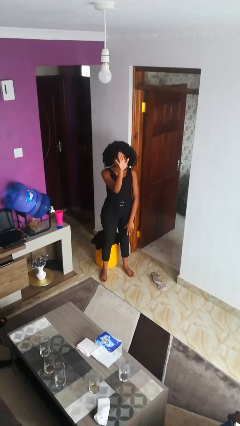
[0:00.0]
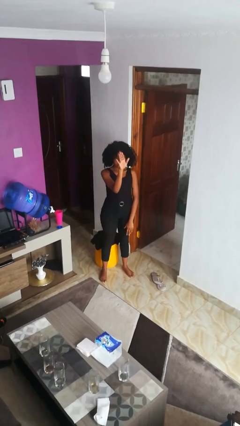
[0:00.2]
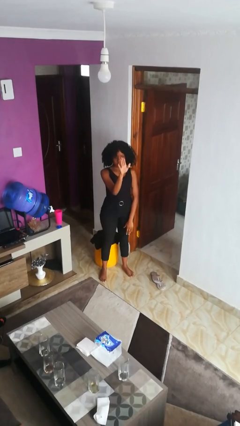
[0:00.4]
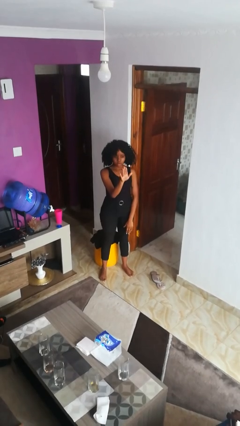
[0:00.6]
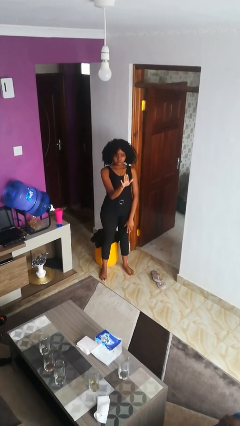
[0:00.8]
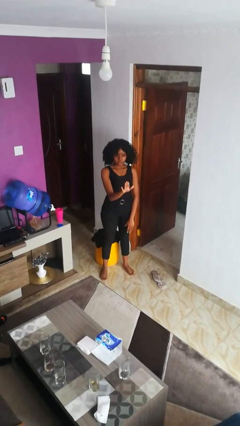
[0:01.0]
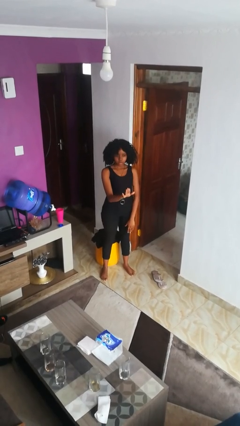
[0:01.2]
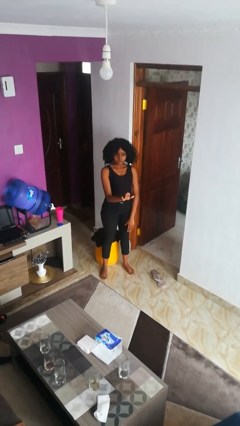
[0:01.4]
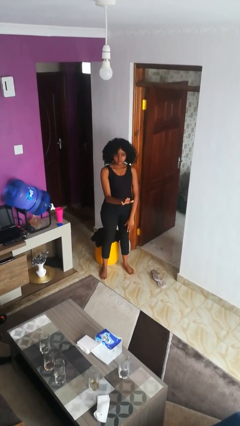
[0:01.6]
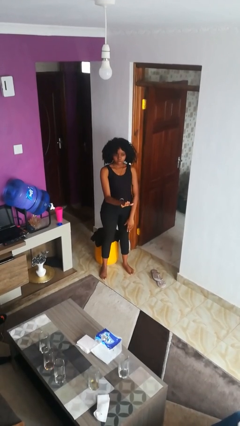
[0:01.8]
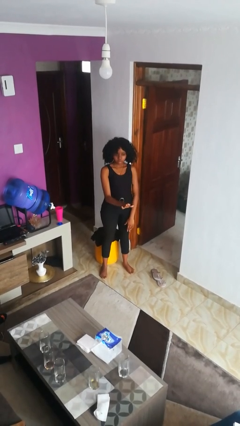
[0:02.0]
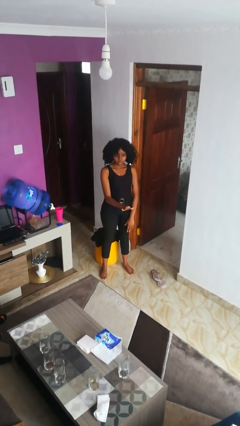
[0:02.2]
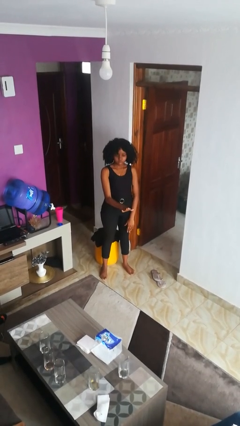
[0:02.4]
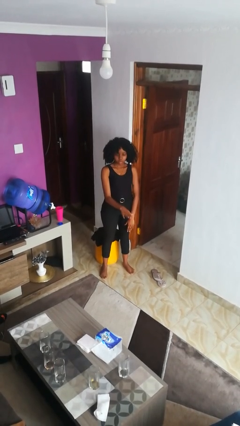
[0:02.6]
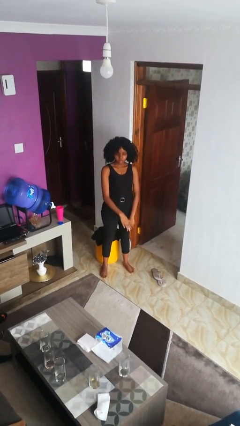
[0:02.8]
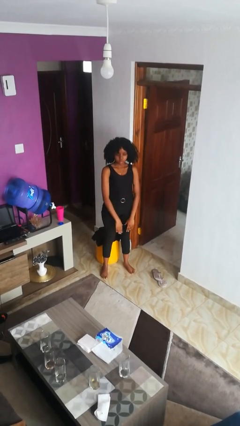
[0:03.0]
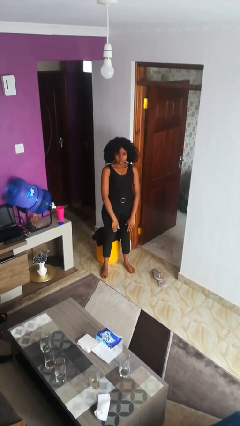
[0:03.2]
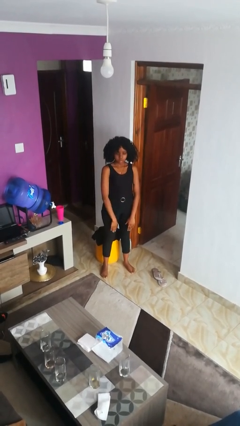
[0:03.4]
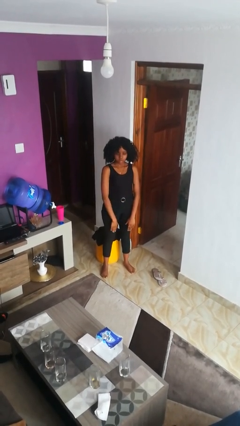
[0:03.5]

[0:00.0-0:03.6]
person gestures swipe down

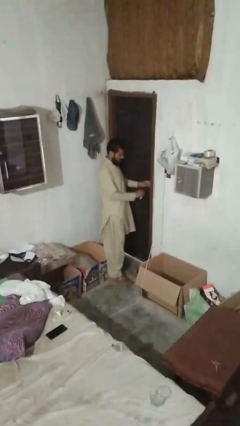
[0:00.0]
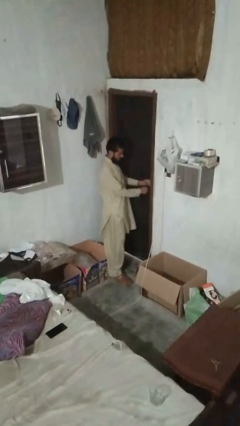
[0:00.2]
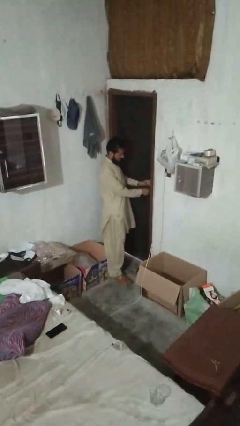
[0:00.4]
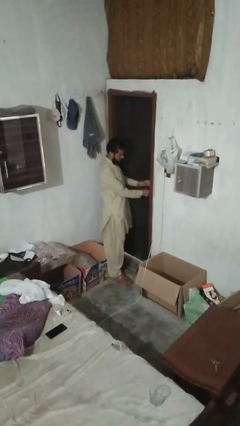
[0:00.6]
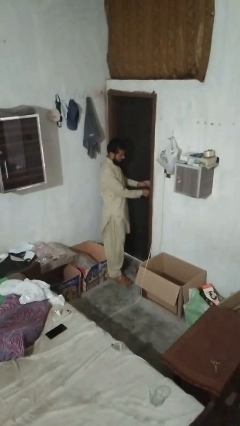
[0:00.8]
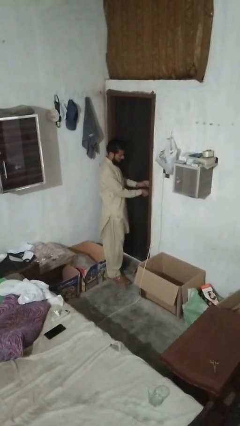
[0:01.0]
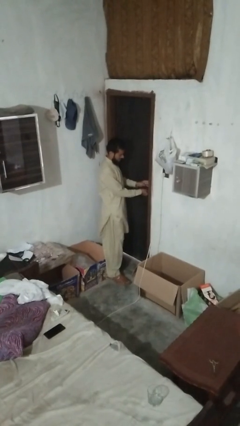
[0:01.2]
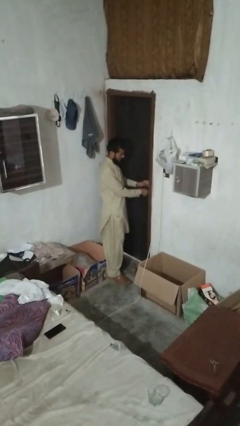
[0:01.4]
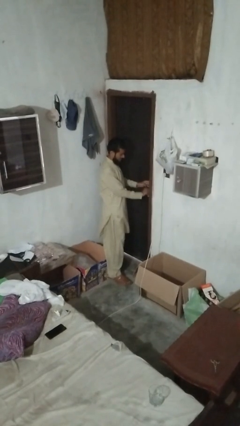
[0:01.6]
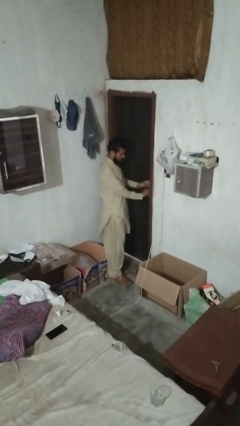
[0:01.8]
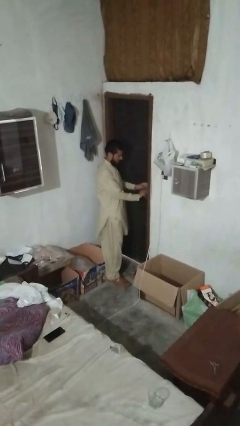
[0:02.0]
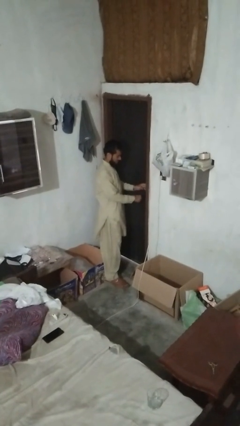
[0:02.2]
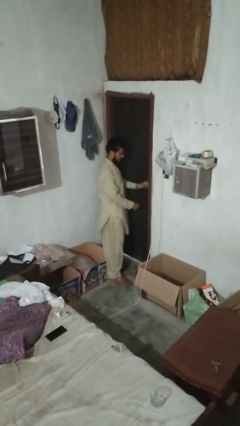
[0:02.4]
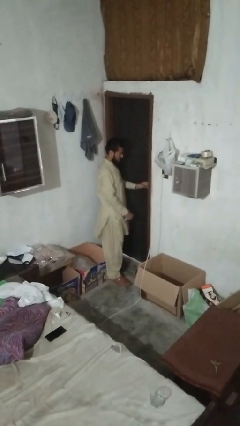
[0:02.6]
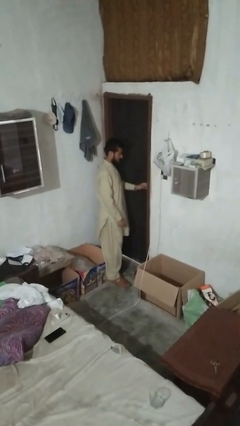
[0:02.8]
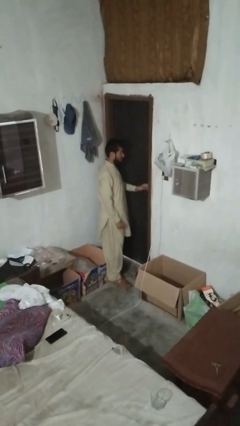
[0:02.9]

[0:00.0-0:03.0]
person unlocks door with keys

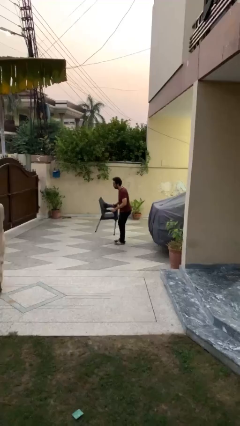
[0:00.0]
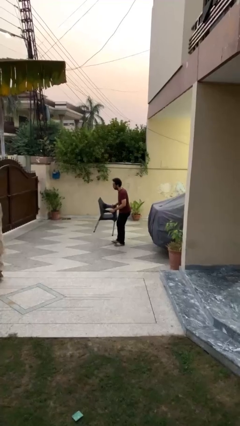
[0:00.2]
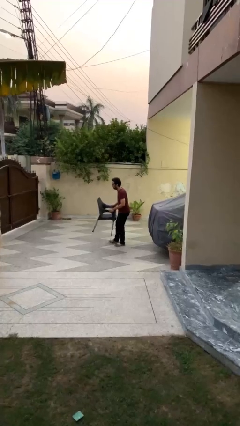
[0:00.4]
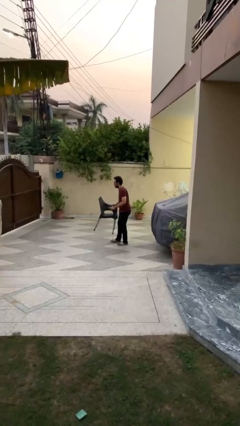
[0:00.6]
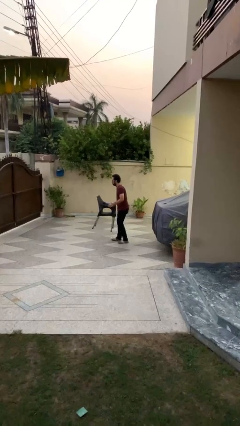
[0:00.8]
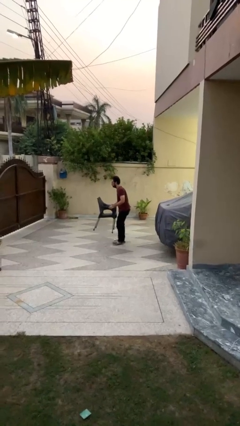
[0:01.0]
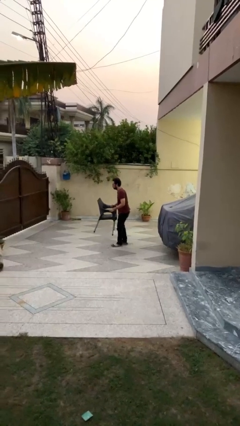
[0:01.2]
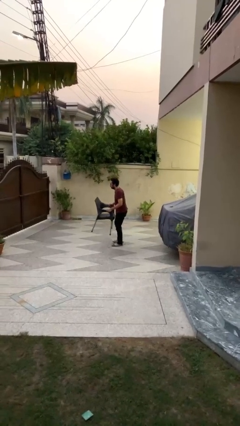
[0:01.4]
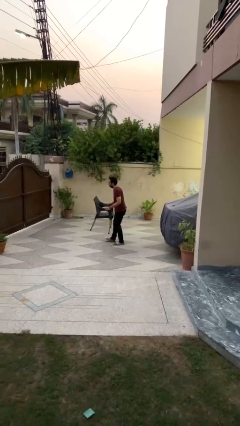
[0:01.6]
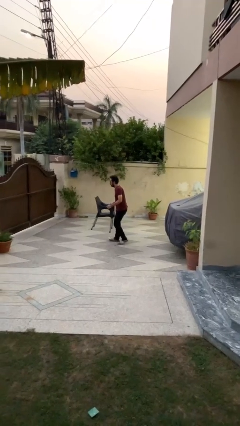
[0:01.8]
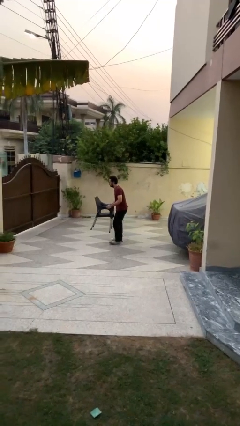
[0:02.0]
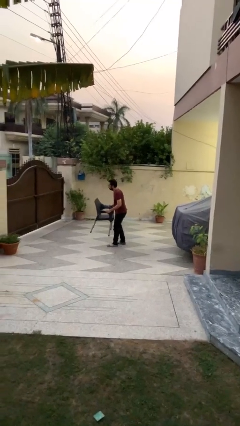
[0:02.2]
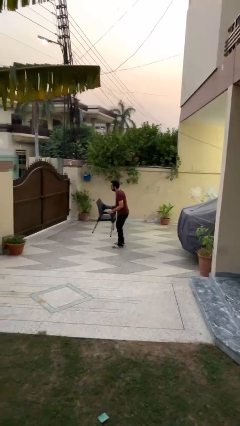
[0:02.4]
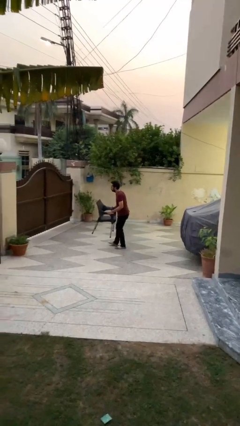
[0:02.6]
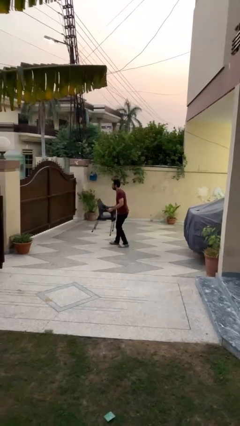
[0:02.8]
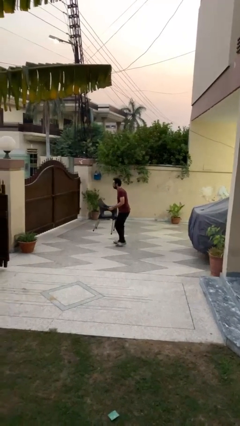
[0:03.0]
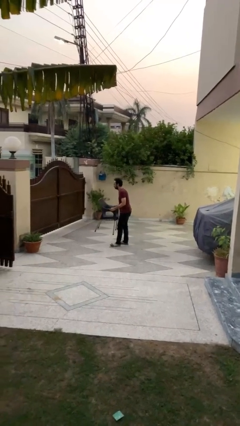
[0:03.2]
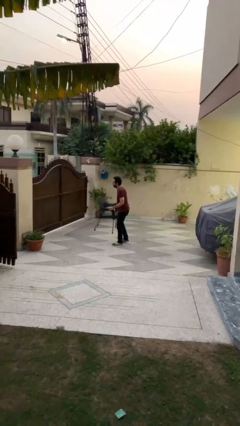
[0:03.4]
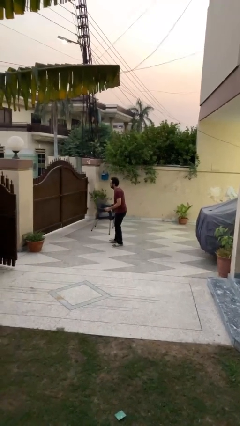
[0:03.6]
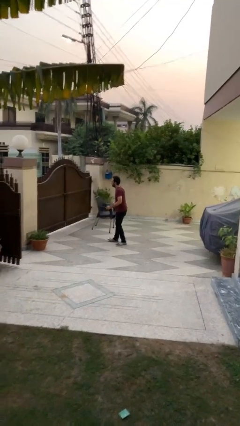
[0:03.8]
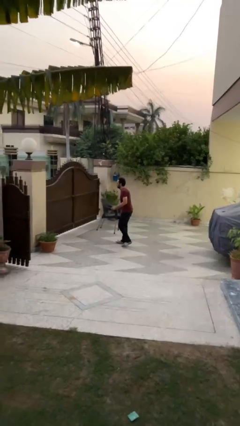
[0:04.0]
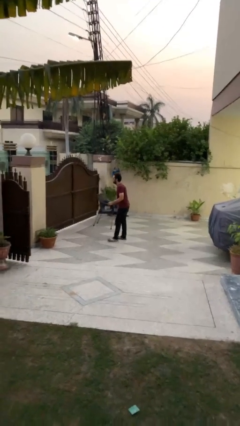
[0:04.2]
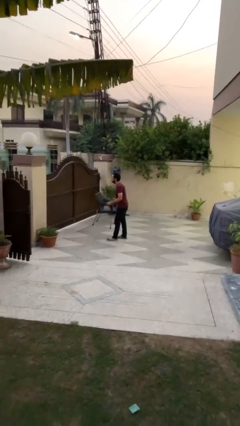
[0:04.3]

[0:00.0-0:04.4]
person carries heavy object

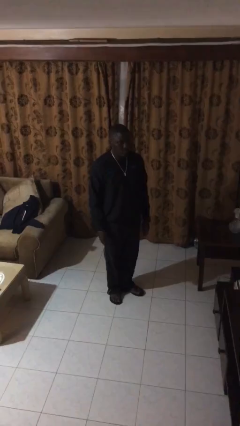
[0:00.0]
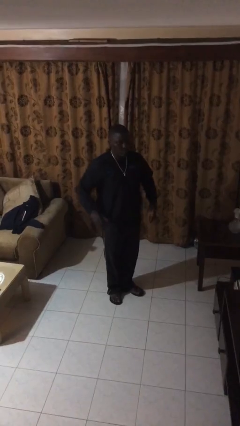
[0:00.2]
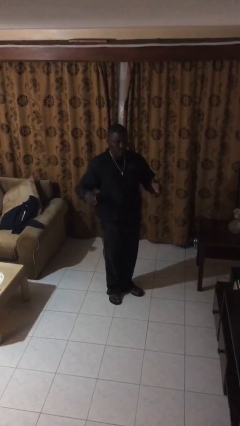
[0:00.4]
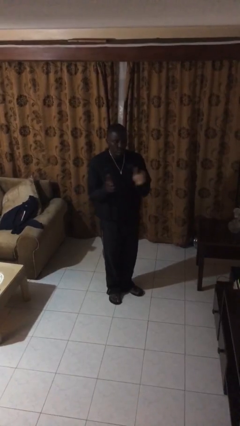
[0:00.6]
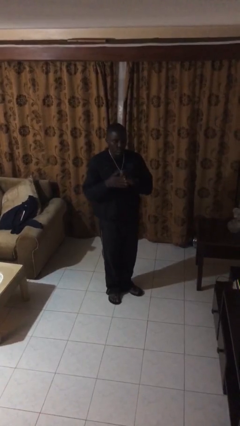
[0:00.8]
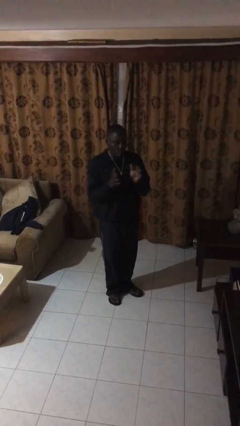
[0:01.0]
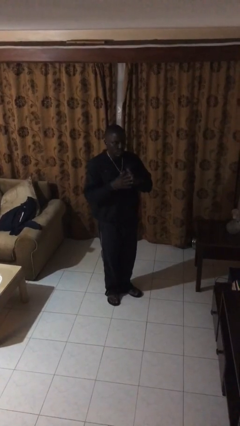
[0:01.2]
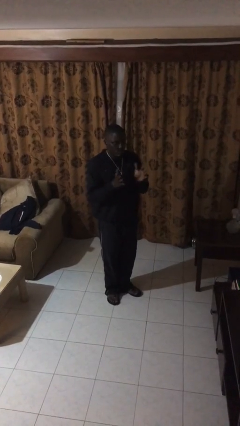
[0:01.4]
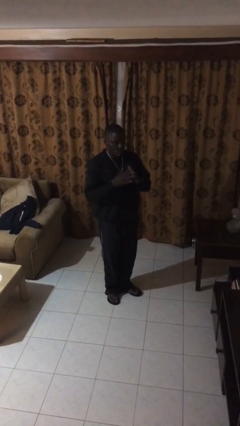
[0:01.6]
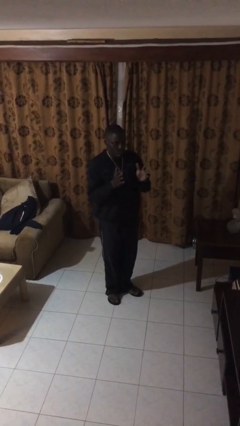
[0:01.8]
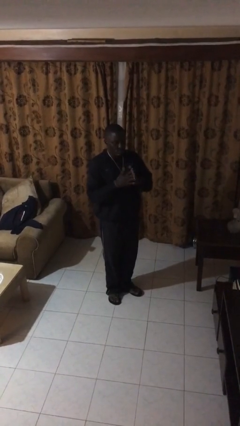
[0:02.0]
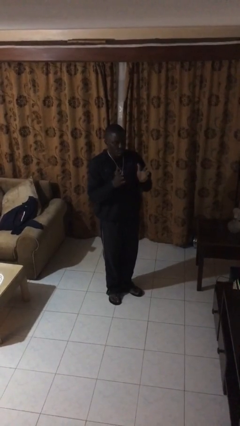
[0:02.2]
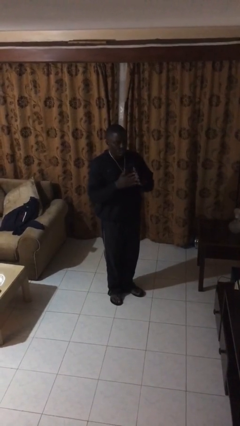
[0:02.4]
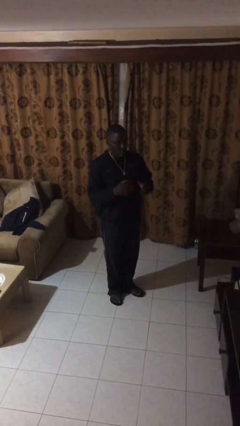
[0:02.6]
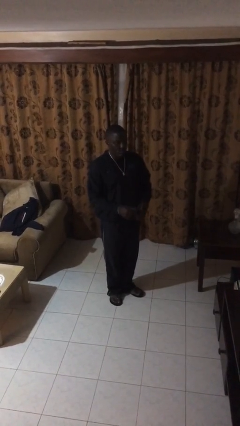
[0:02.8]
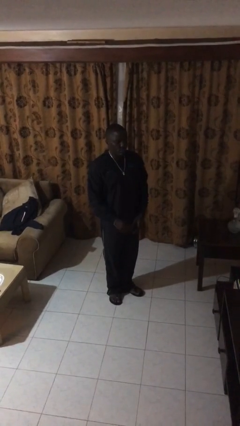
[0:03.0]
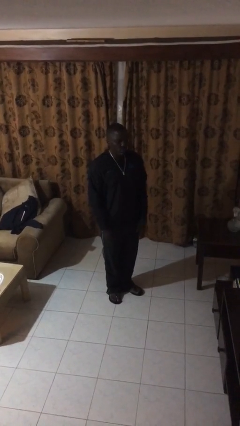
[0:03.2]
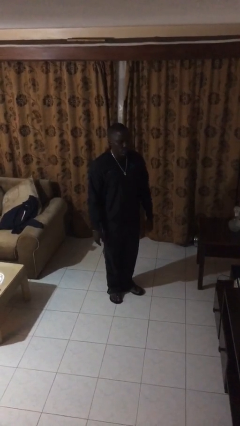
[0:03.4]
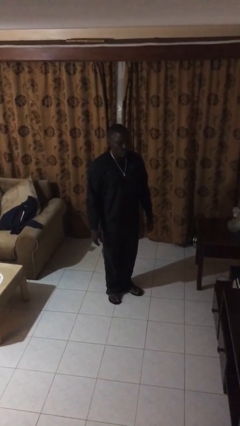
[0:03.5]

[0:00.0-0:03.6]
person claps hands

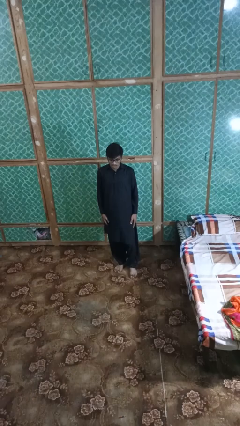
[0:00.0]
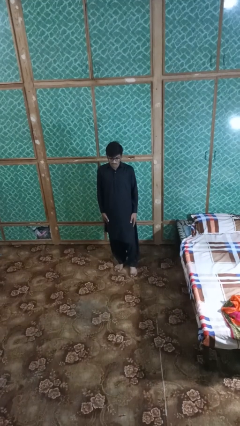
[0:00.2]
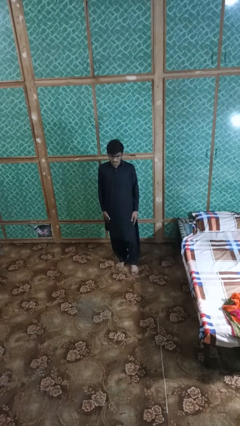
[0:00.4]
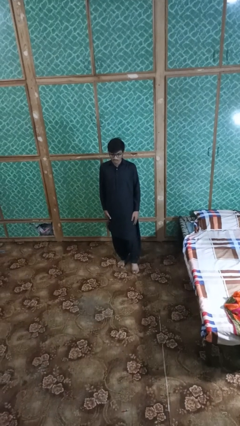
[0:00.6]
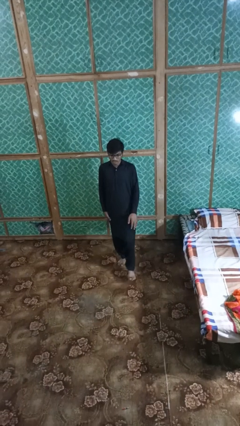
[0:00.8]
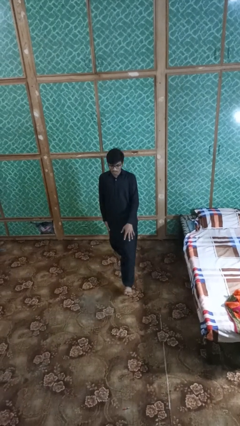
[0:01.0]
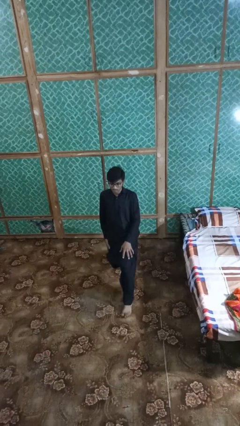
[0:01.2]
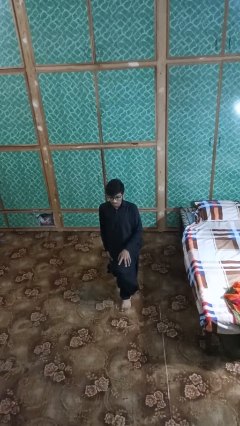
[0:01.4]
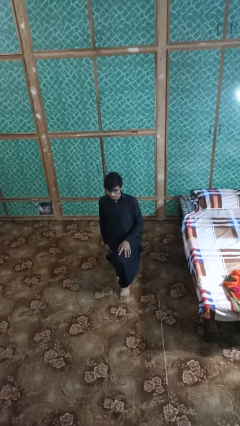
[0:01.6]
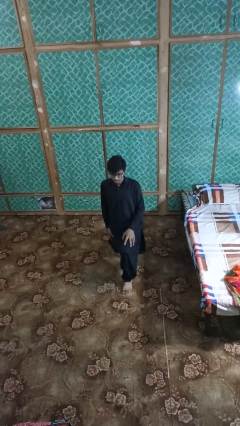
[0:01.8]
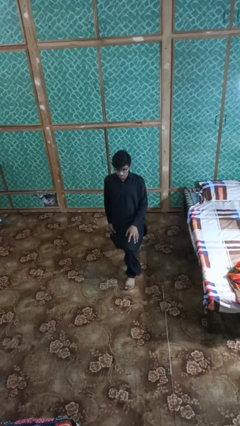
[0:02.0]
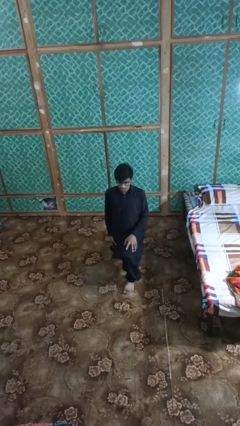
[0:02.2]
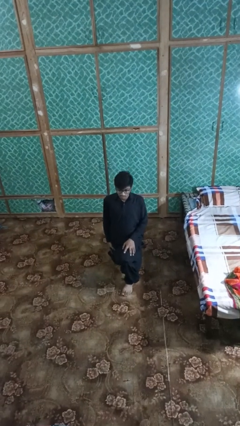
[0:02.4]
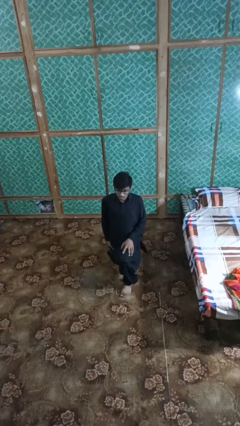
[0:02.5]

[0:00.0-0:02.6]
person exercises with lunges

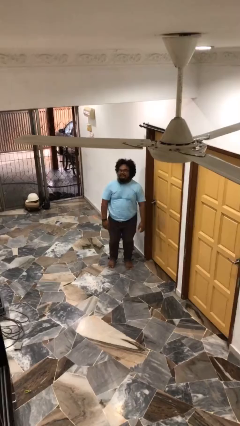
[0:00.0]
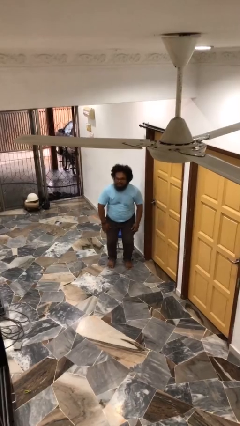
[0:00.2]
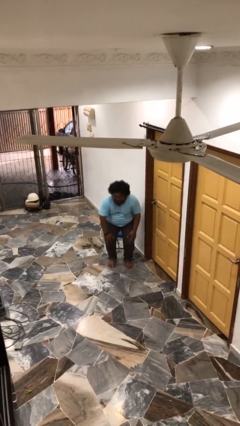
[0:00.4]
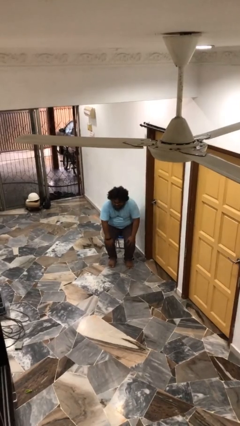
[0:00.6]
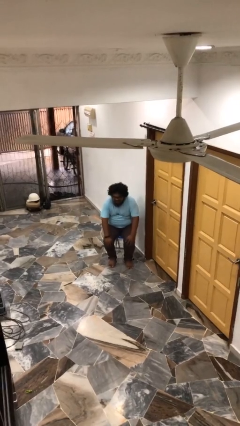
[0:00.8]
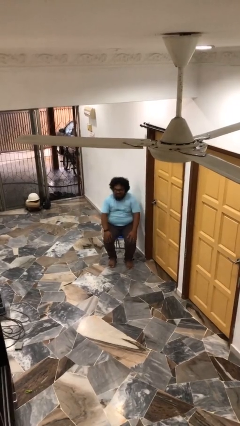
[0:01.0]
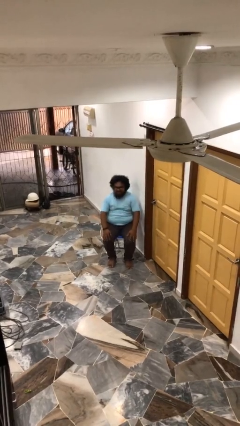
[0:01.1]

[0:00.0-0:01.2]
person sits down
